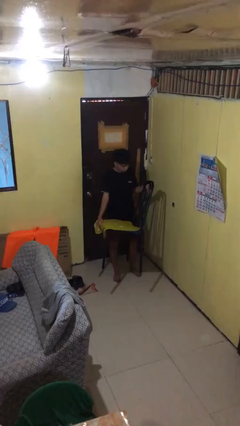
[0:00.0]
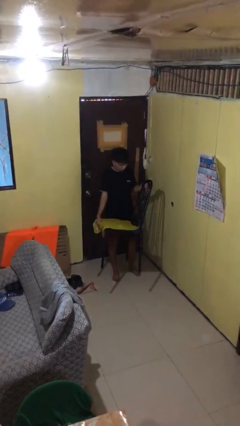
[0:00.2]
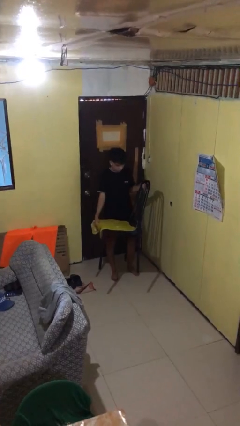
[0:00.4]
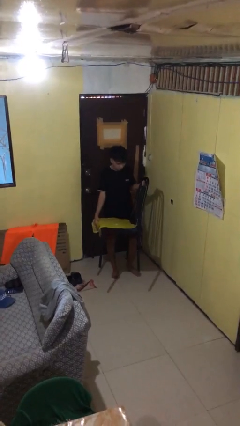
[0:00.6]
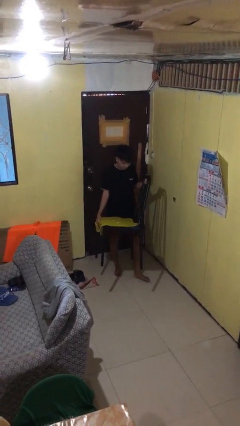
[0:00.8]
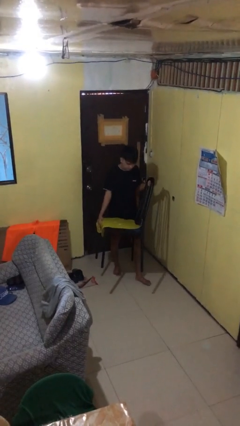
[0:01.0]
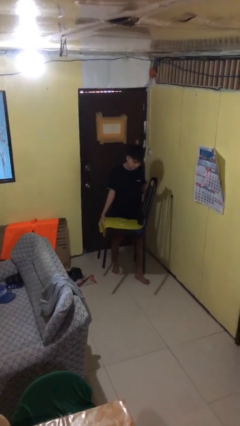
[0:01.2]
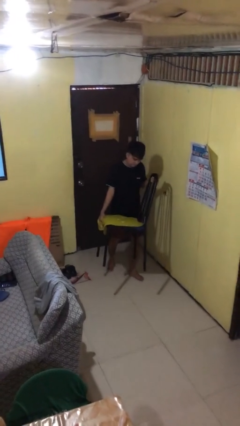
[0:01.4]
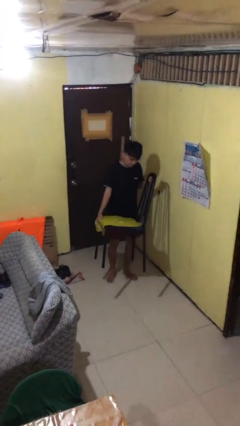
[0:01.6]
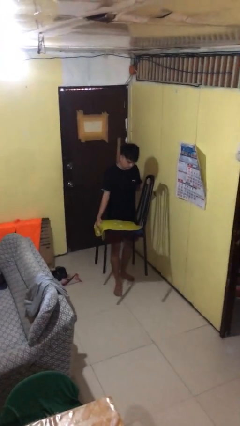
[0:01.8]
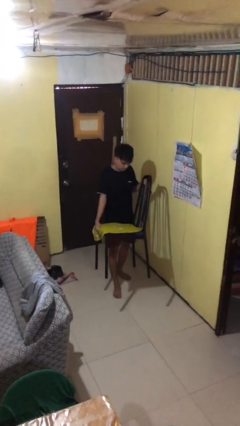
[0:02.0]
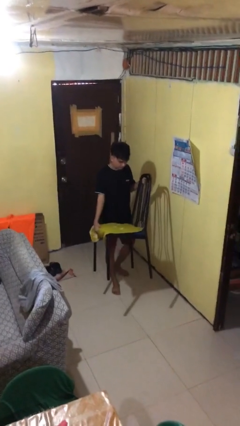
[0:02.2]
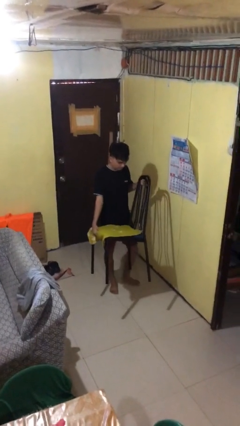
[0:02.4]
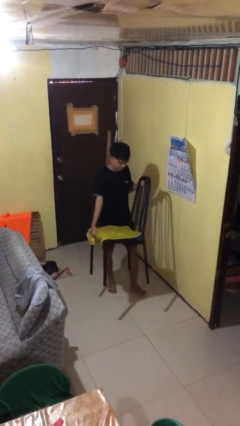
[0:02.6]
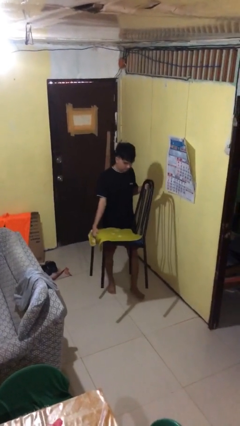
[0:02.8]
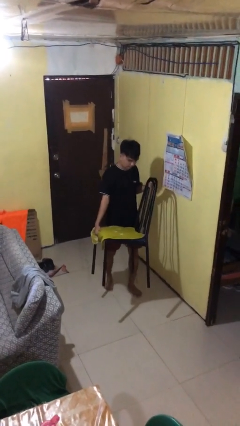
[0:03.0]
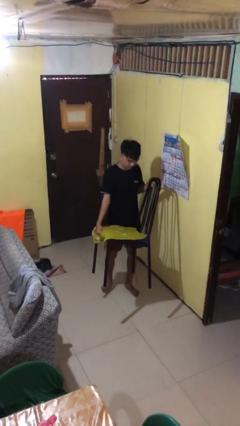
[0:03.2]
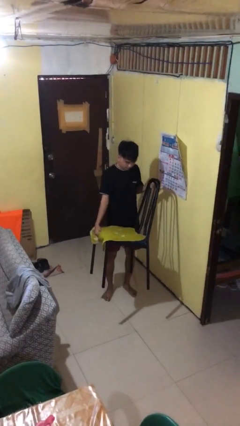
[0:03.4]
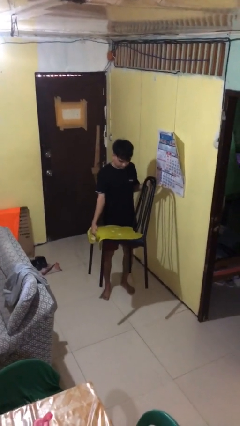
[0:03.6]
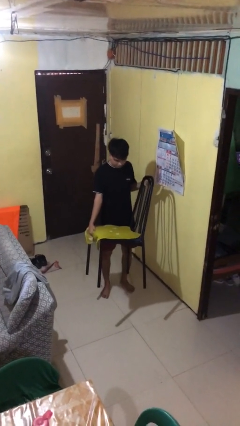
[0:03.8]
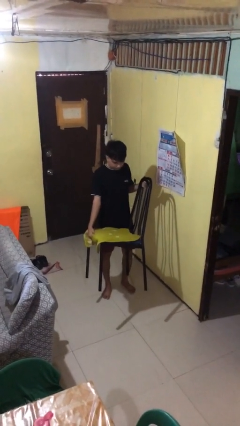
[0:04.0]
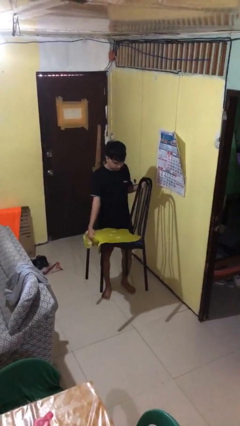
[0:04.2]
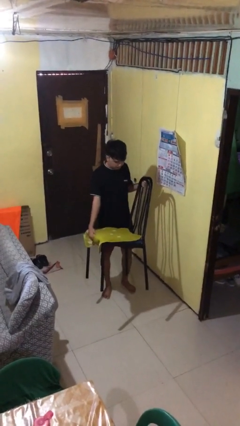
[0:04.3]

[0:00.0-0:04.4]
person carries furniture

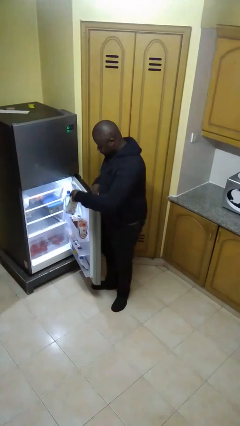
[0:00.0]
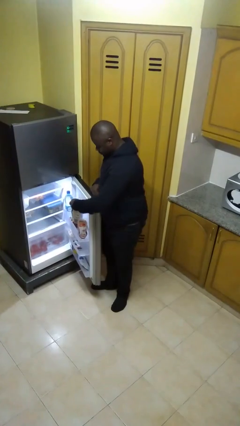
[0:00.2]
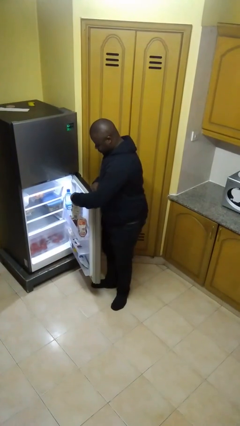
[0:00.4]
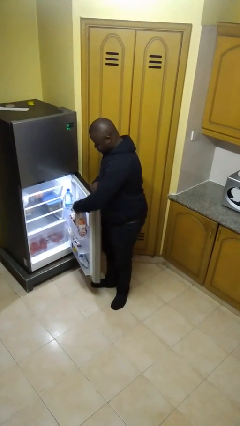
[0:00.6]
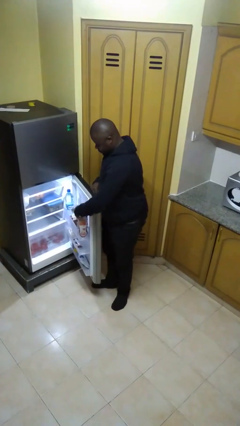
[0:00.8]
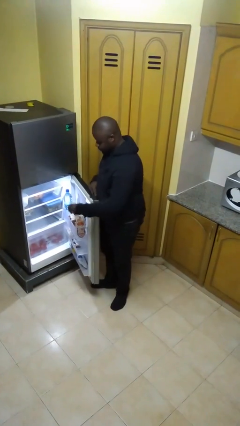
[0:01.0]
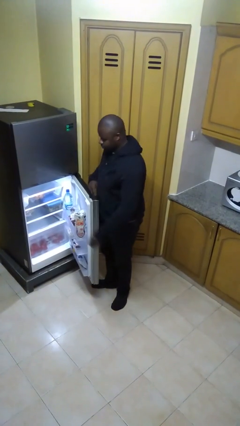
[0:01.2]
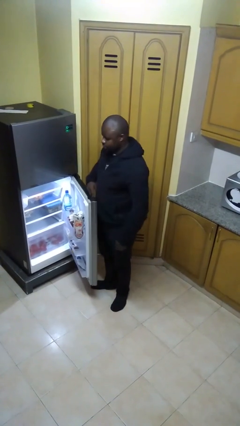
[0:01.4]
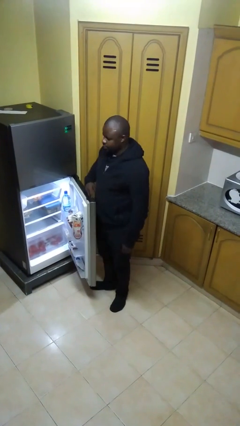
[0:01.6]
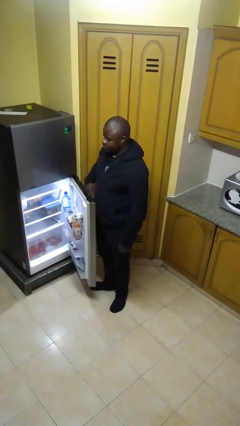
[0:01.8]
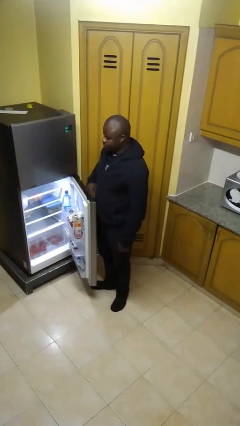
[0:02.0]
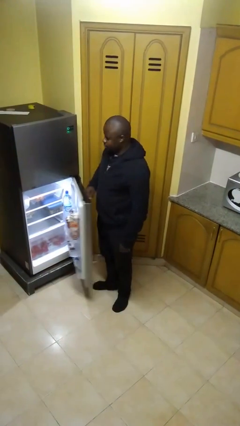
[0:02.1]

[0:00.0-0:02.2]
person puts object into refrigerator

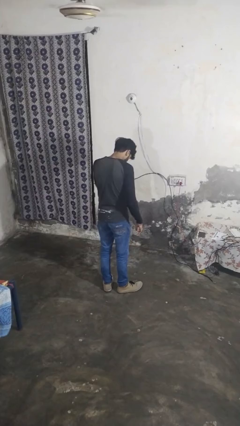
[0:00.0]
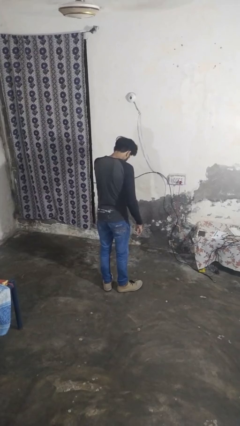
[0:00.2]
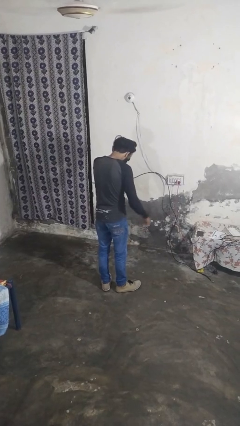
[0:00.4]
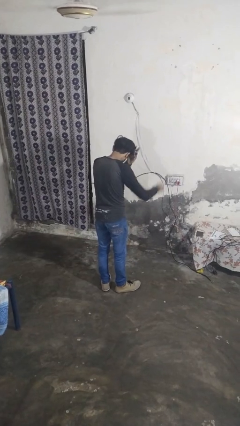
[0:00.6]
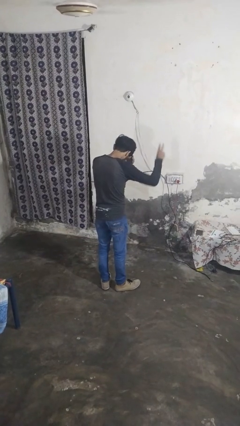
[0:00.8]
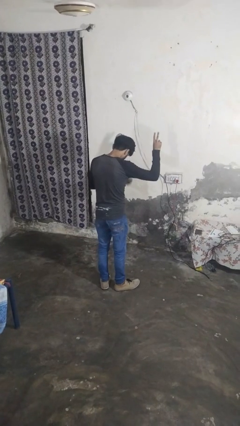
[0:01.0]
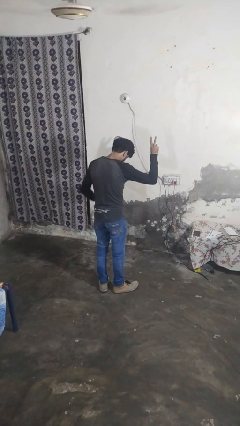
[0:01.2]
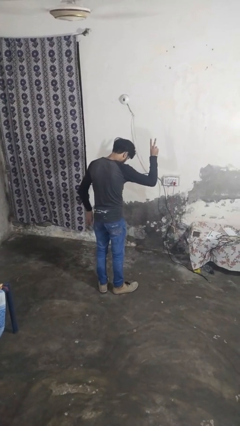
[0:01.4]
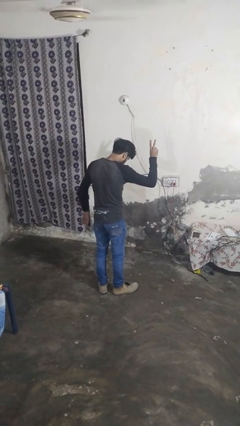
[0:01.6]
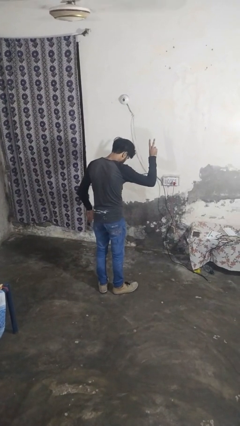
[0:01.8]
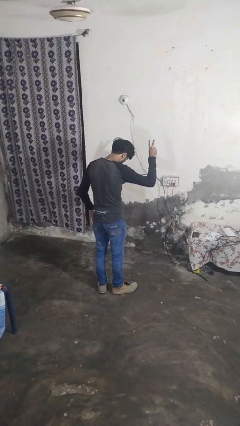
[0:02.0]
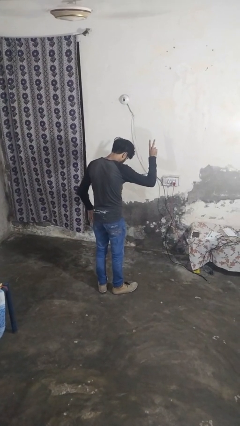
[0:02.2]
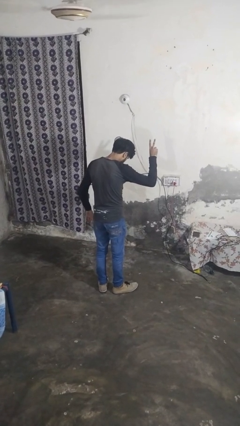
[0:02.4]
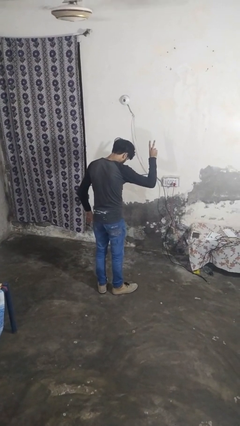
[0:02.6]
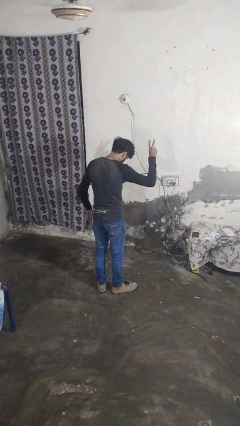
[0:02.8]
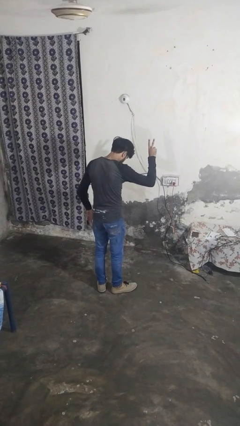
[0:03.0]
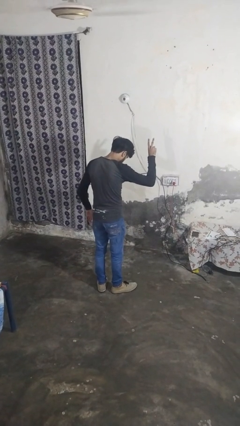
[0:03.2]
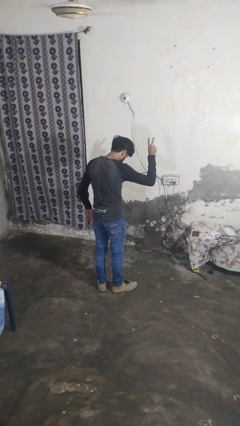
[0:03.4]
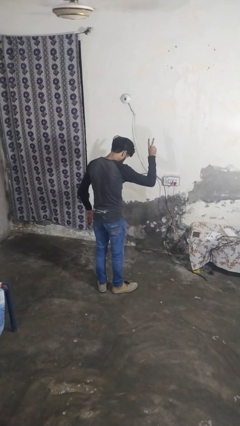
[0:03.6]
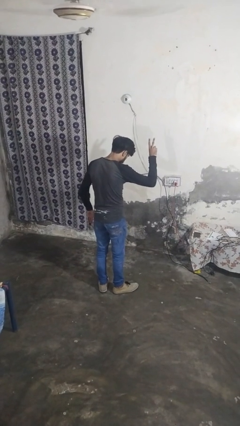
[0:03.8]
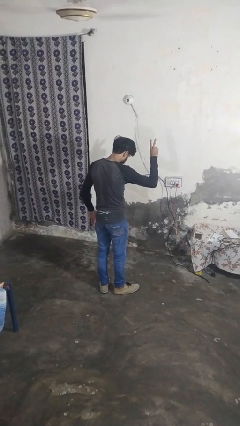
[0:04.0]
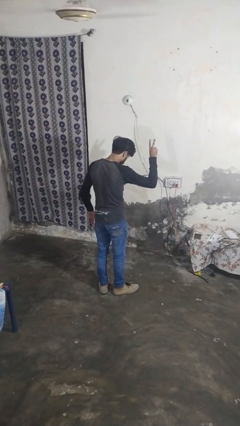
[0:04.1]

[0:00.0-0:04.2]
person gestures peace

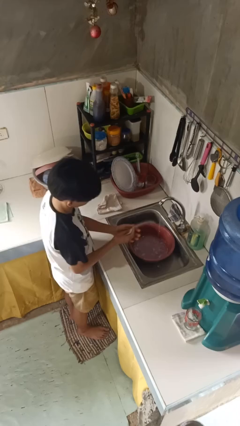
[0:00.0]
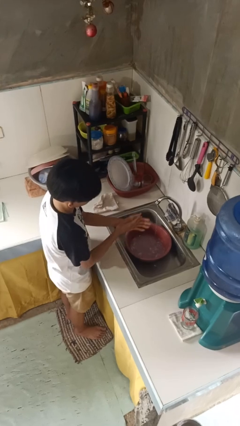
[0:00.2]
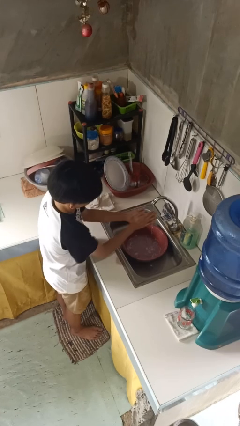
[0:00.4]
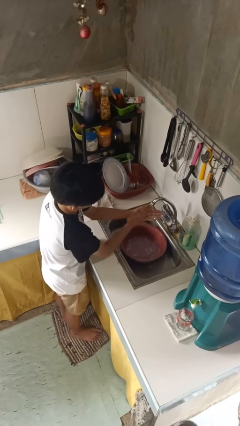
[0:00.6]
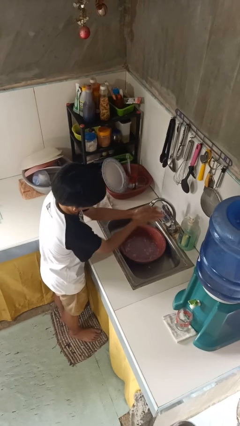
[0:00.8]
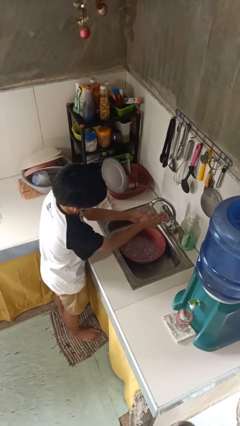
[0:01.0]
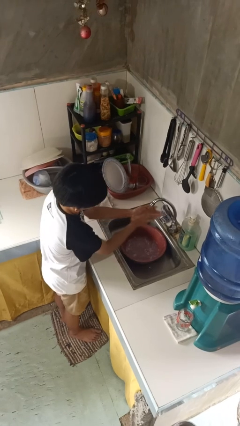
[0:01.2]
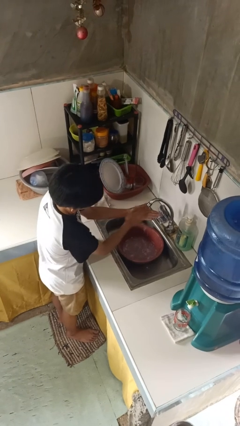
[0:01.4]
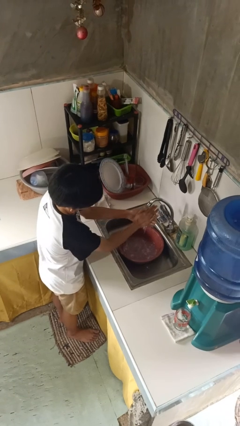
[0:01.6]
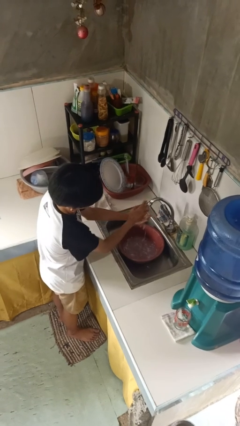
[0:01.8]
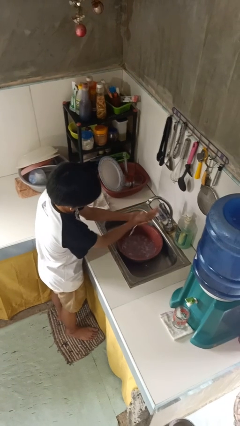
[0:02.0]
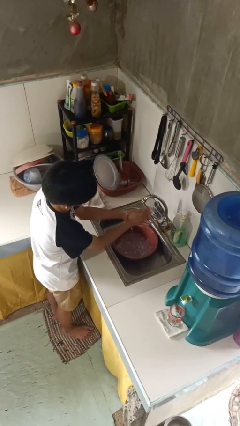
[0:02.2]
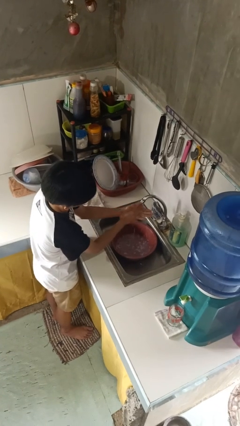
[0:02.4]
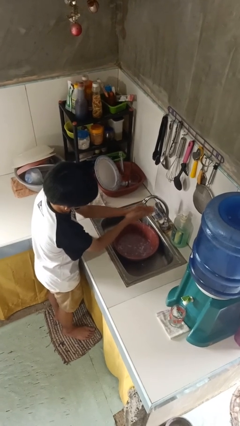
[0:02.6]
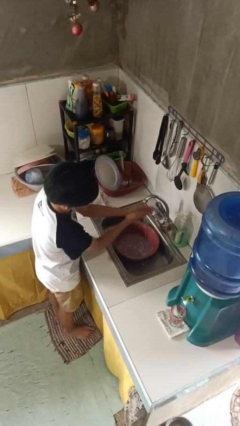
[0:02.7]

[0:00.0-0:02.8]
person washes hands

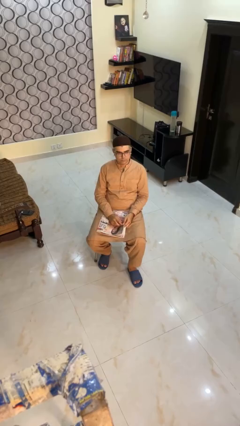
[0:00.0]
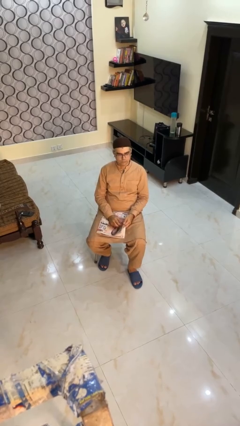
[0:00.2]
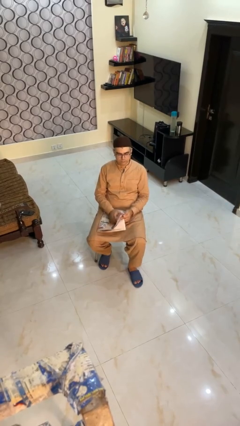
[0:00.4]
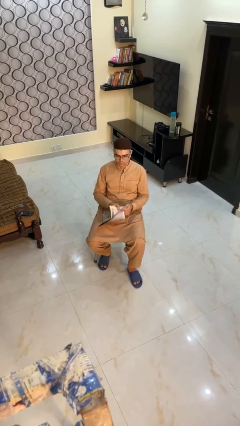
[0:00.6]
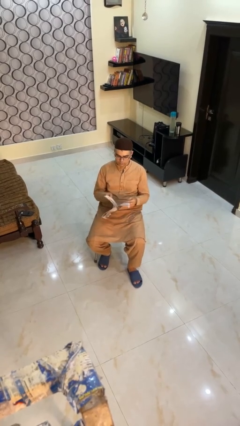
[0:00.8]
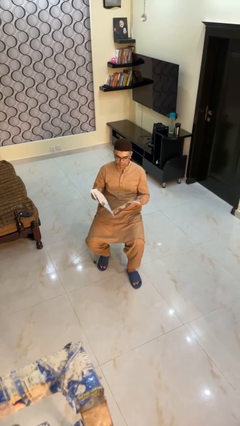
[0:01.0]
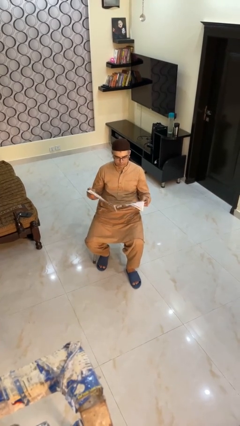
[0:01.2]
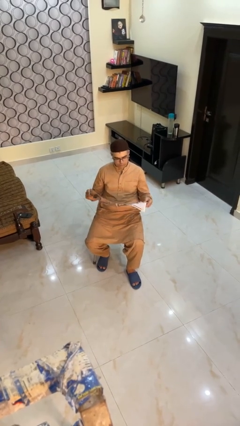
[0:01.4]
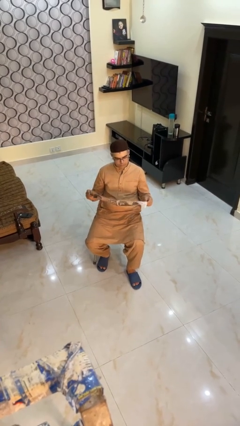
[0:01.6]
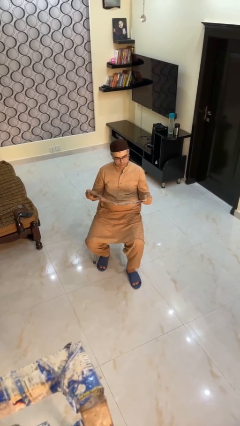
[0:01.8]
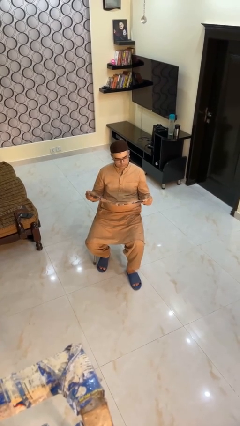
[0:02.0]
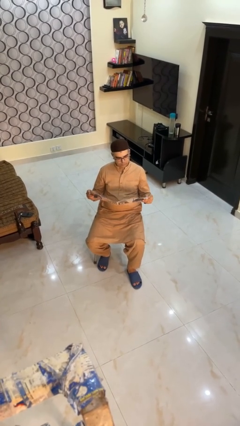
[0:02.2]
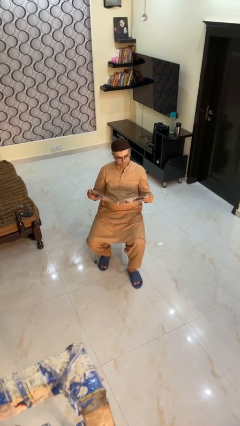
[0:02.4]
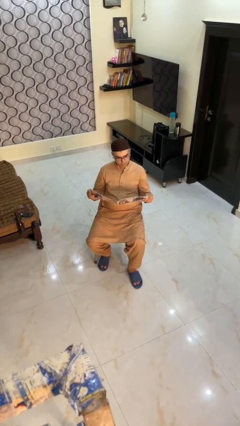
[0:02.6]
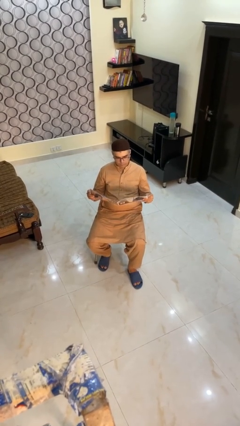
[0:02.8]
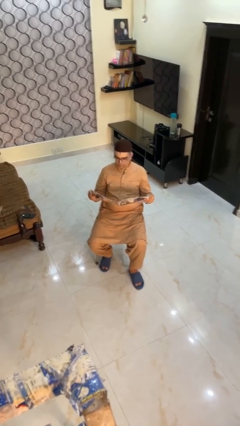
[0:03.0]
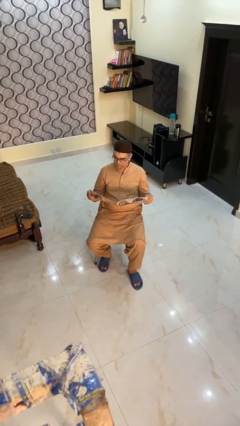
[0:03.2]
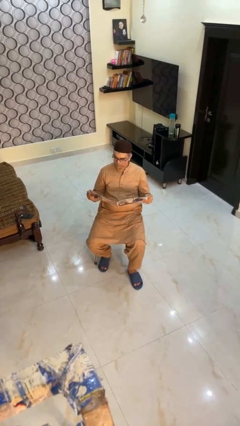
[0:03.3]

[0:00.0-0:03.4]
person reads magazine

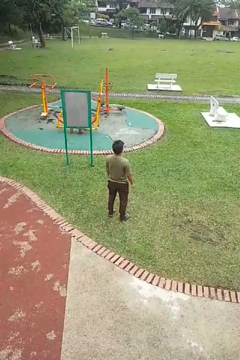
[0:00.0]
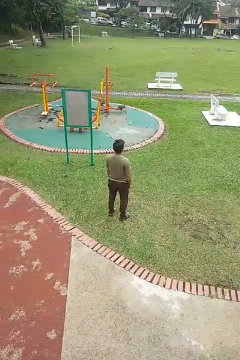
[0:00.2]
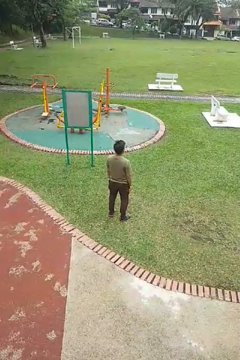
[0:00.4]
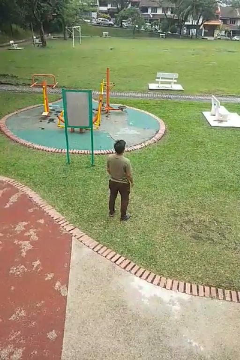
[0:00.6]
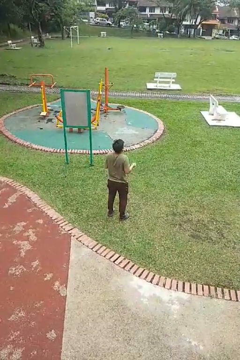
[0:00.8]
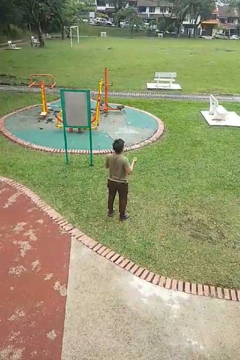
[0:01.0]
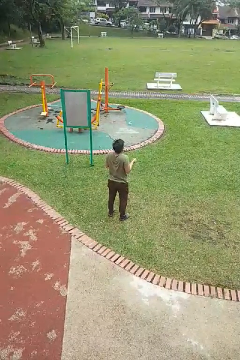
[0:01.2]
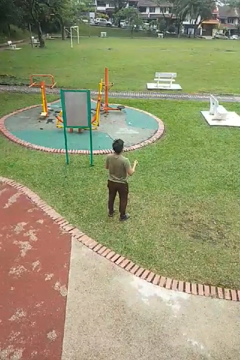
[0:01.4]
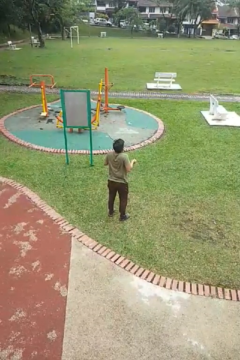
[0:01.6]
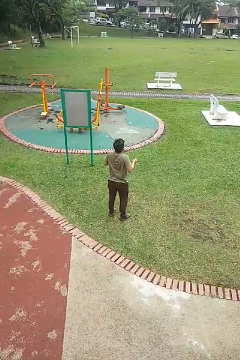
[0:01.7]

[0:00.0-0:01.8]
person shrugs
